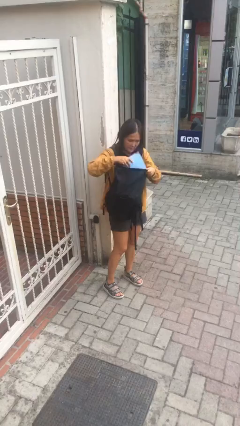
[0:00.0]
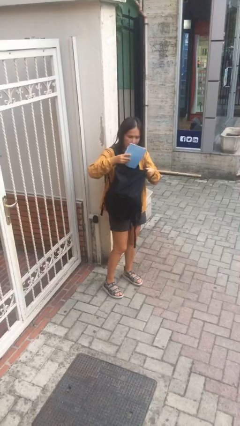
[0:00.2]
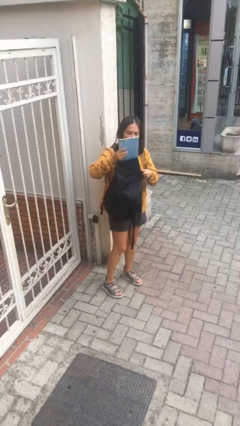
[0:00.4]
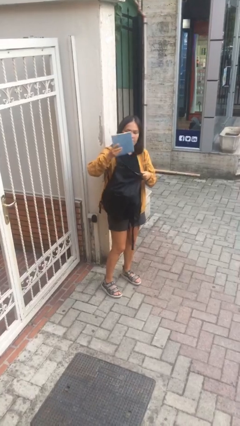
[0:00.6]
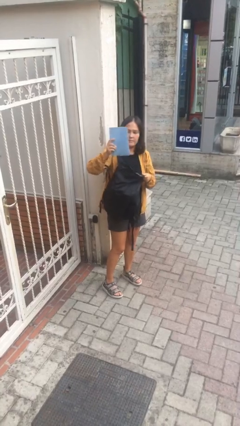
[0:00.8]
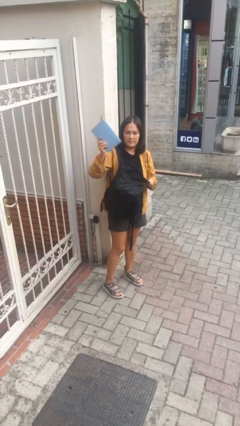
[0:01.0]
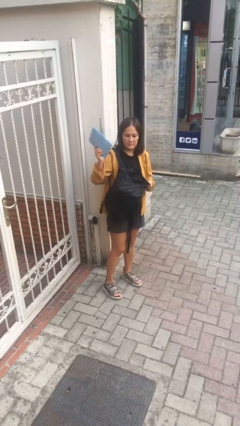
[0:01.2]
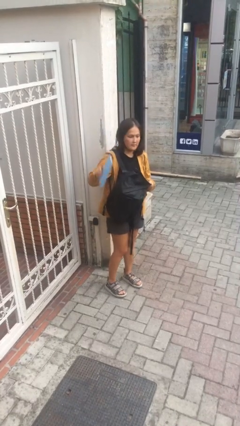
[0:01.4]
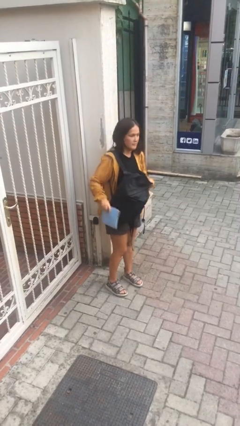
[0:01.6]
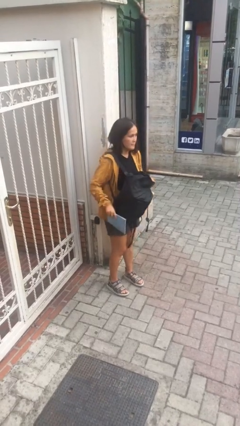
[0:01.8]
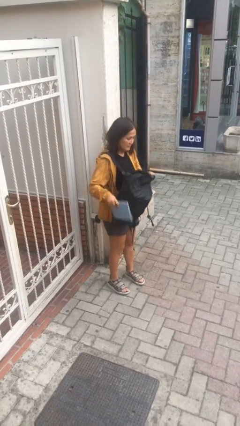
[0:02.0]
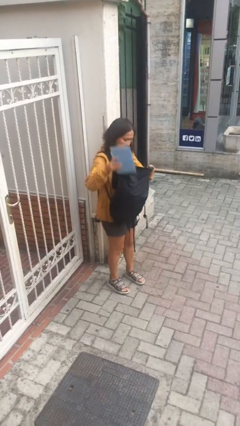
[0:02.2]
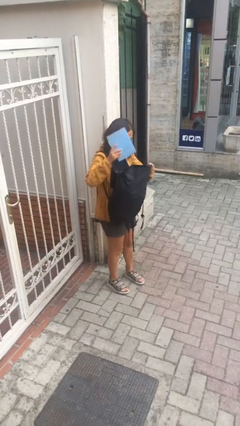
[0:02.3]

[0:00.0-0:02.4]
person takes object from backpack

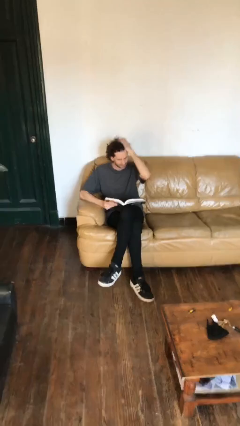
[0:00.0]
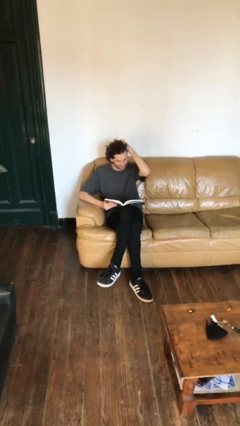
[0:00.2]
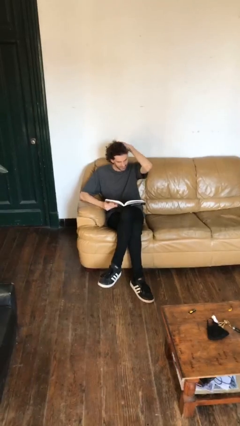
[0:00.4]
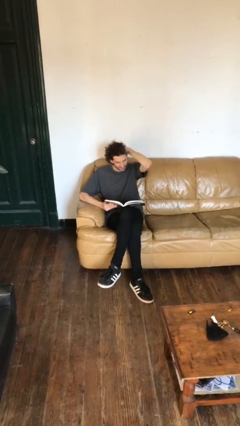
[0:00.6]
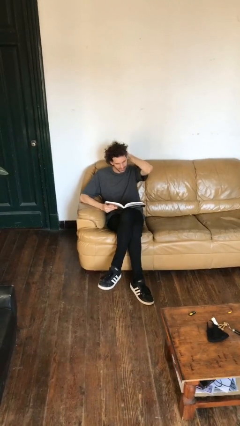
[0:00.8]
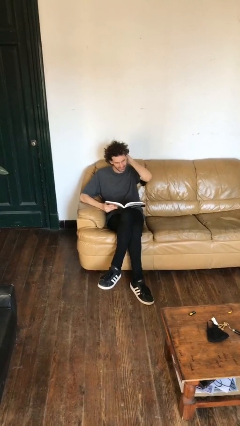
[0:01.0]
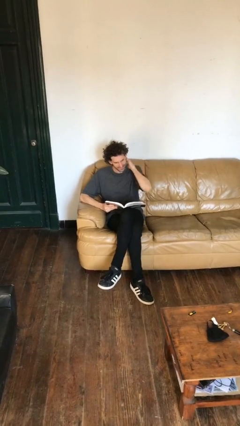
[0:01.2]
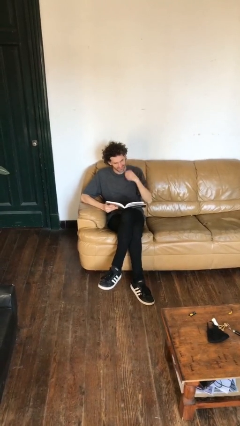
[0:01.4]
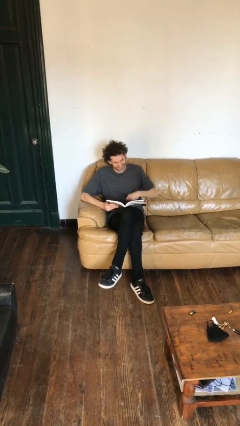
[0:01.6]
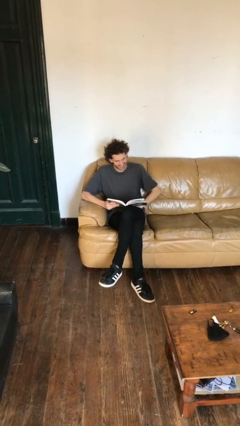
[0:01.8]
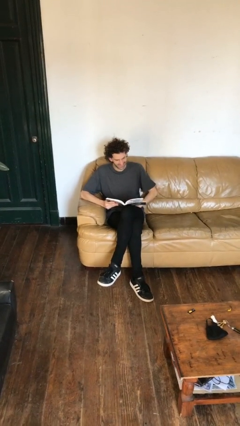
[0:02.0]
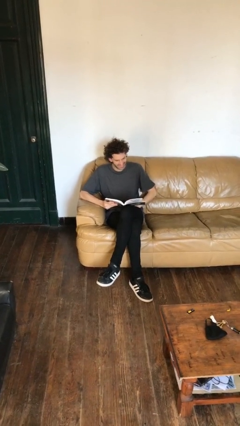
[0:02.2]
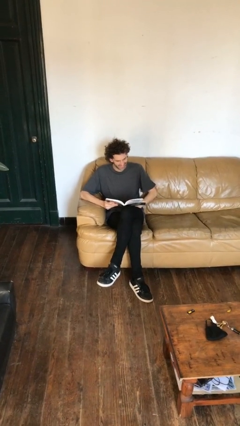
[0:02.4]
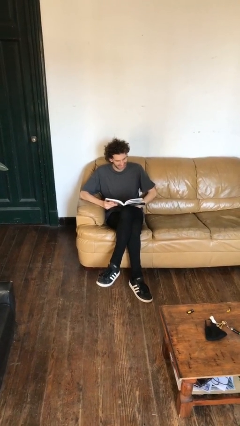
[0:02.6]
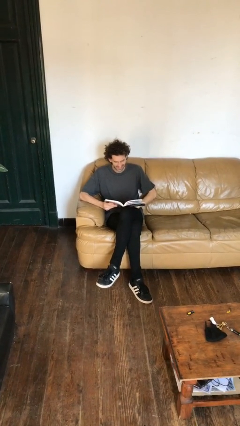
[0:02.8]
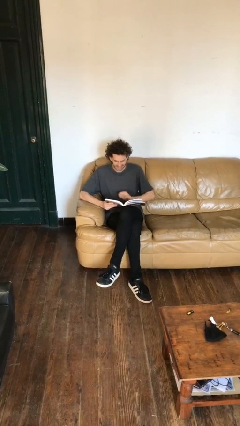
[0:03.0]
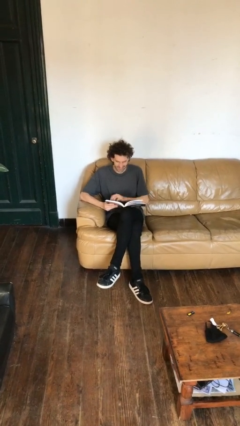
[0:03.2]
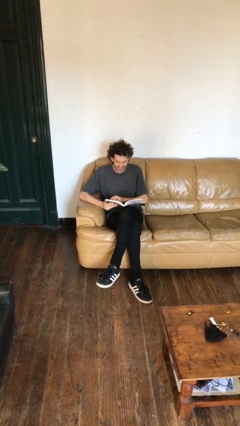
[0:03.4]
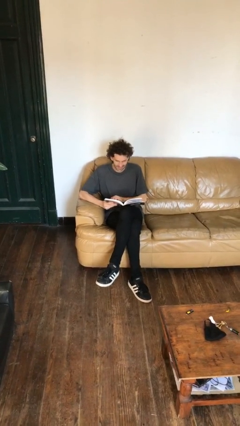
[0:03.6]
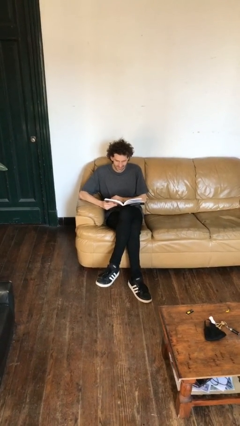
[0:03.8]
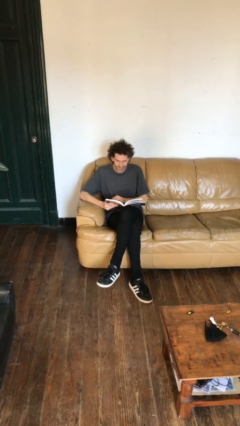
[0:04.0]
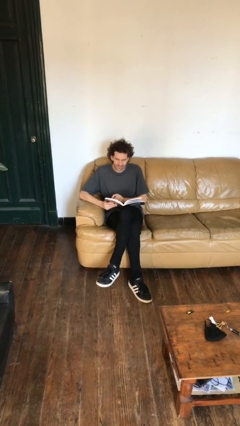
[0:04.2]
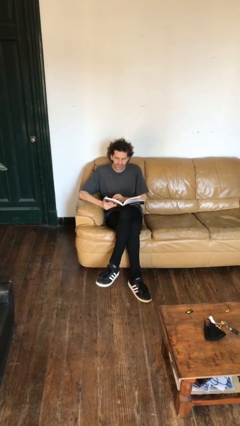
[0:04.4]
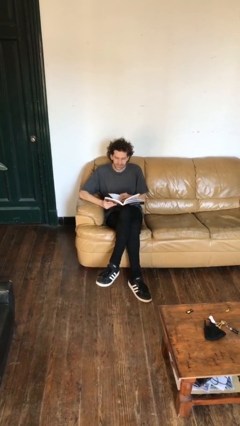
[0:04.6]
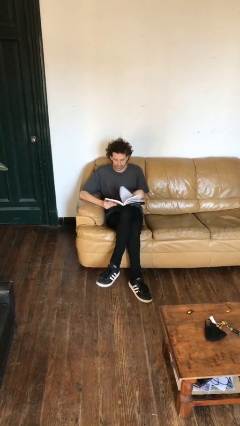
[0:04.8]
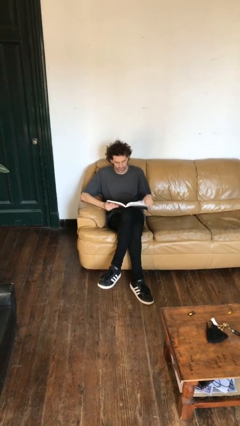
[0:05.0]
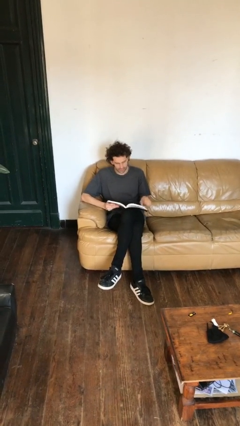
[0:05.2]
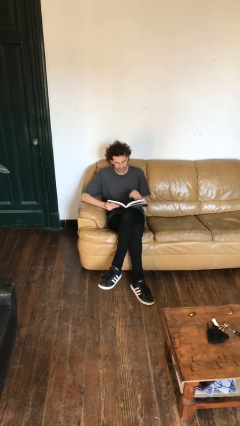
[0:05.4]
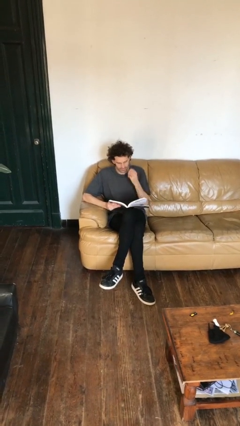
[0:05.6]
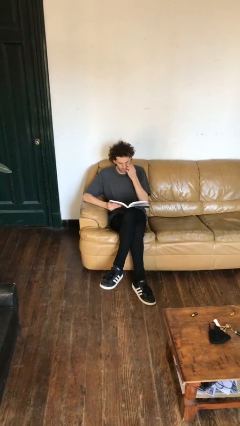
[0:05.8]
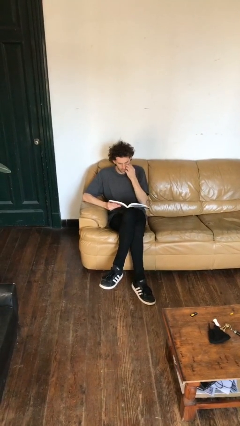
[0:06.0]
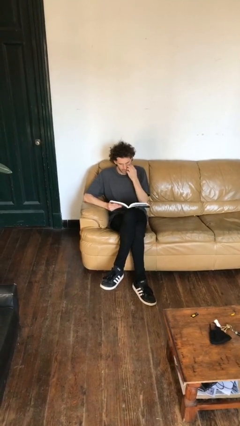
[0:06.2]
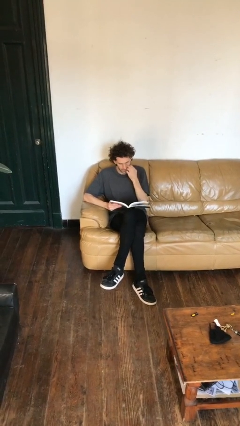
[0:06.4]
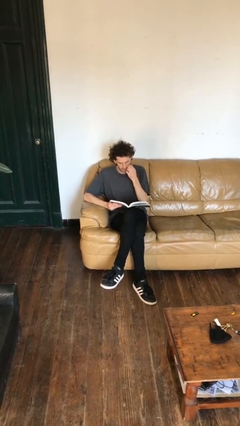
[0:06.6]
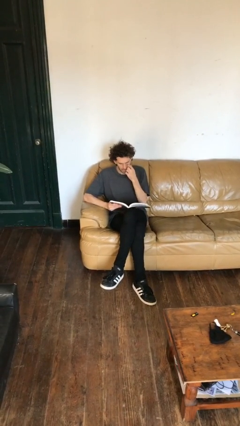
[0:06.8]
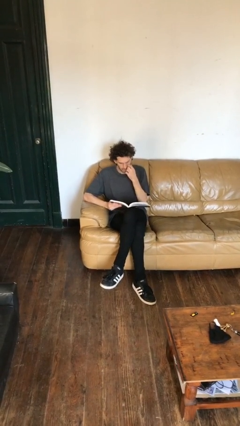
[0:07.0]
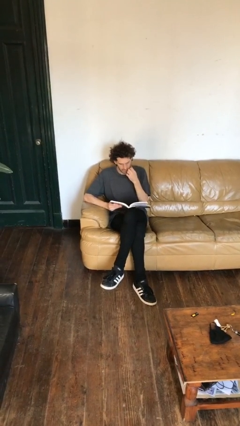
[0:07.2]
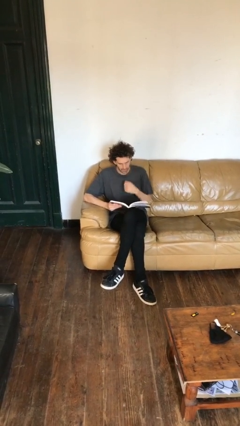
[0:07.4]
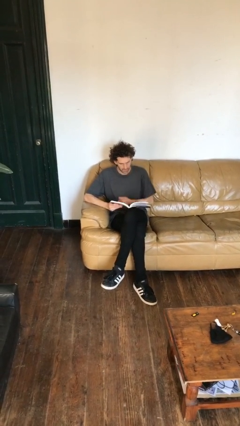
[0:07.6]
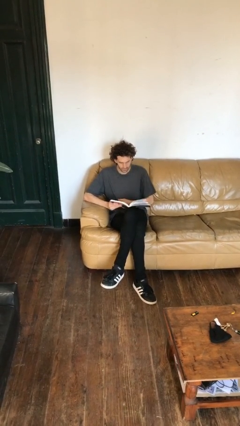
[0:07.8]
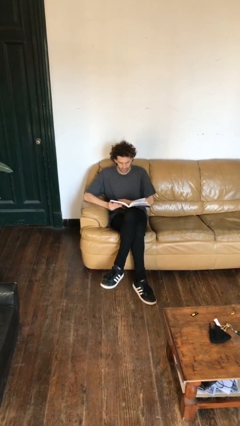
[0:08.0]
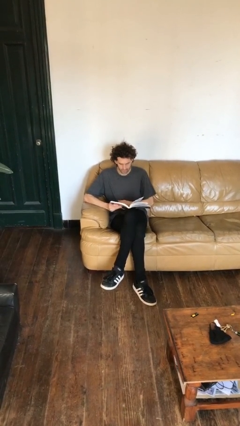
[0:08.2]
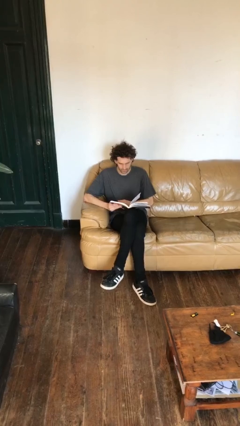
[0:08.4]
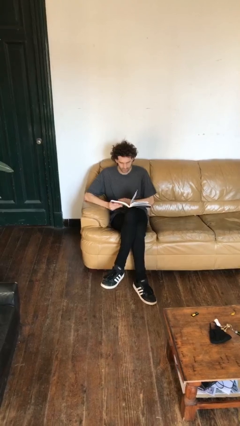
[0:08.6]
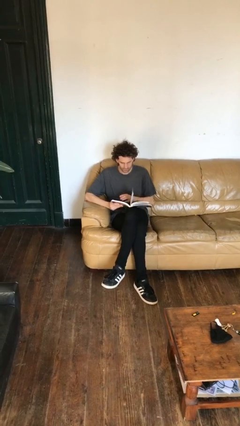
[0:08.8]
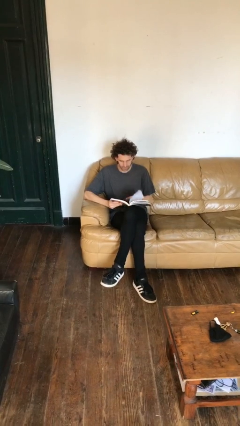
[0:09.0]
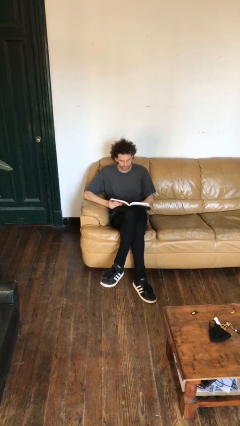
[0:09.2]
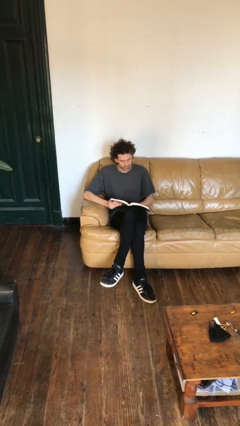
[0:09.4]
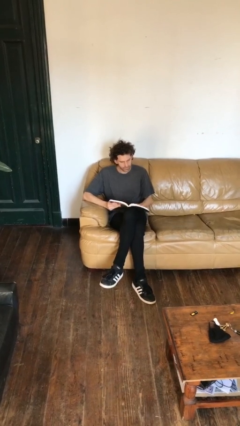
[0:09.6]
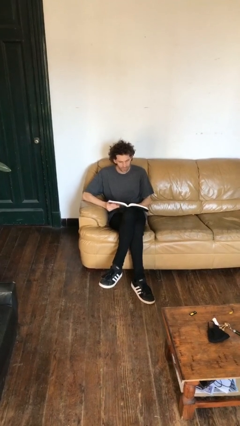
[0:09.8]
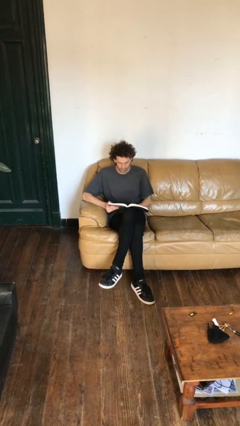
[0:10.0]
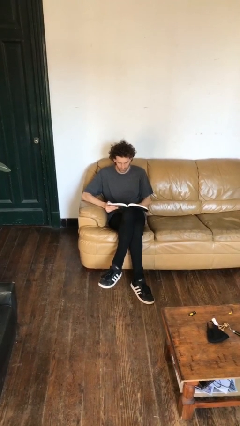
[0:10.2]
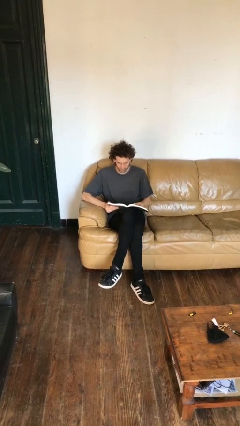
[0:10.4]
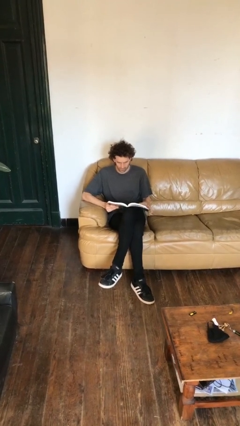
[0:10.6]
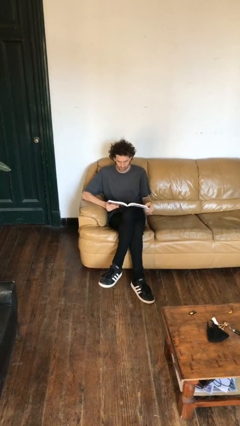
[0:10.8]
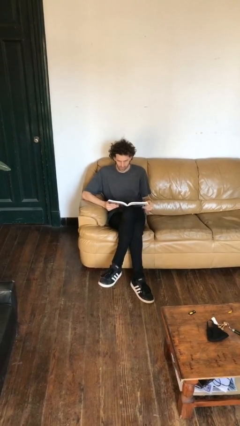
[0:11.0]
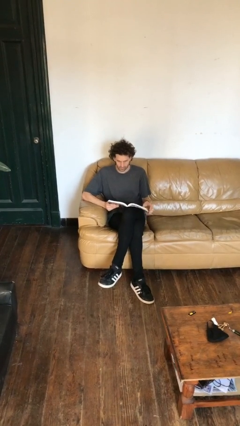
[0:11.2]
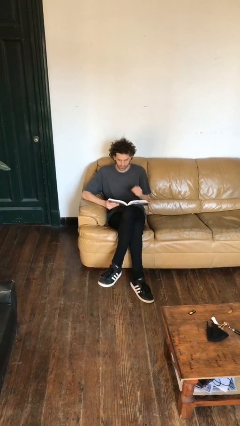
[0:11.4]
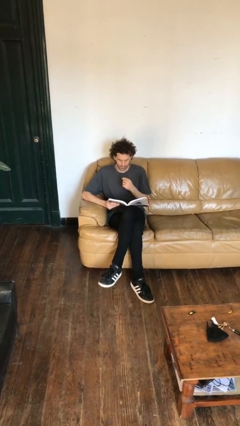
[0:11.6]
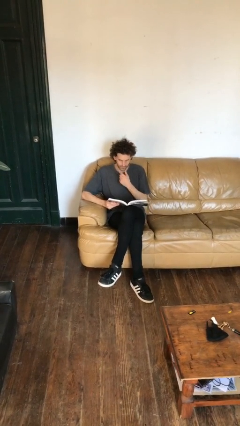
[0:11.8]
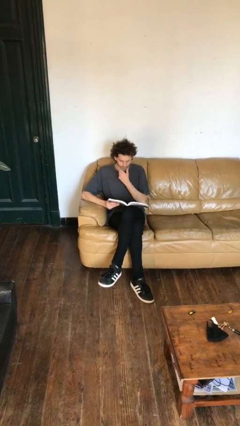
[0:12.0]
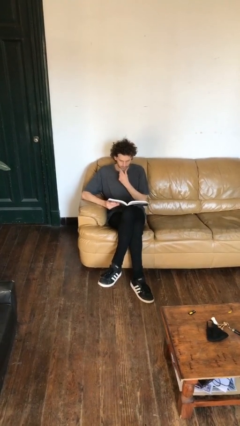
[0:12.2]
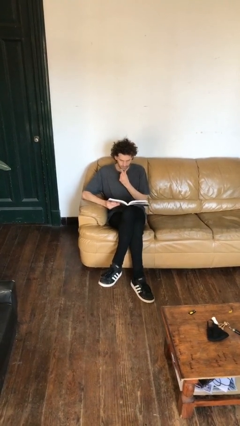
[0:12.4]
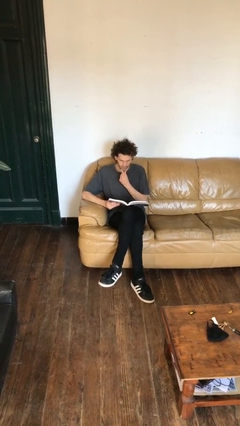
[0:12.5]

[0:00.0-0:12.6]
person reads document

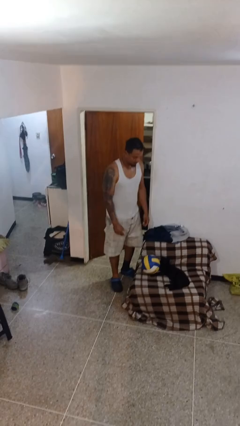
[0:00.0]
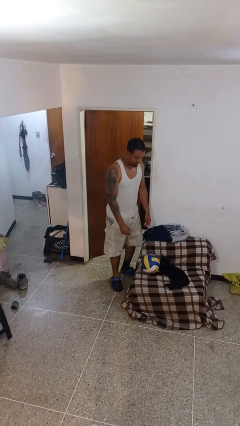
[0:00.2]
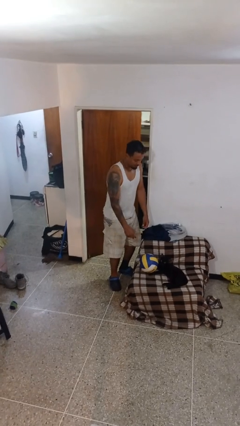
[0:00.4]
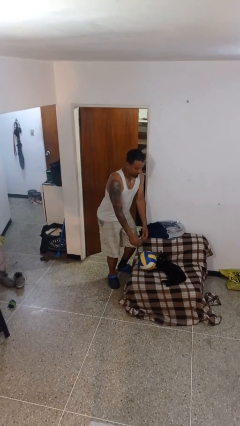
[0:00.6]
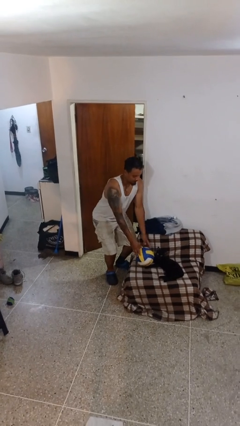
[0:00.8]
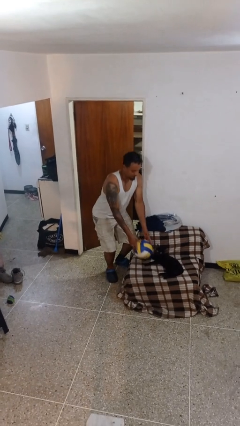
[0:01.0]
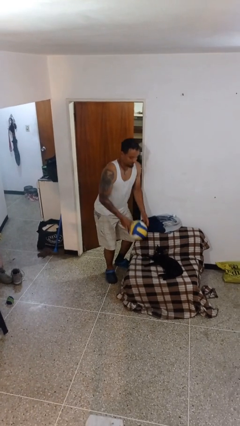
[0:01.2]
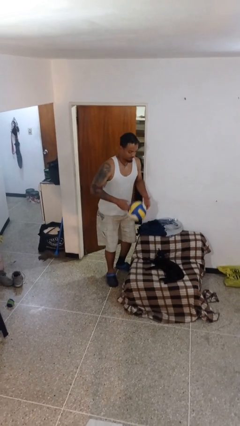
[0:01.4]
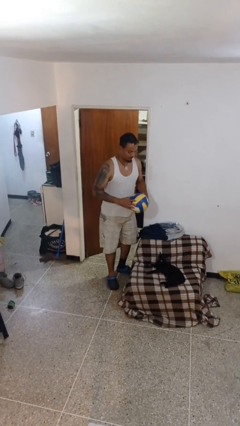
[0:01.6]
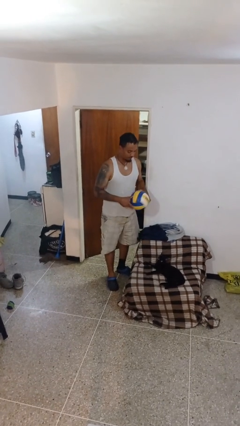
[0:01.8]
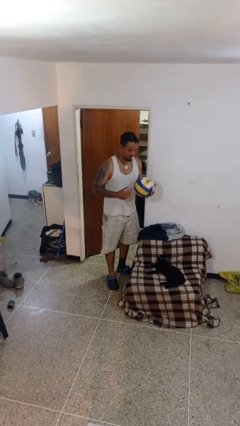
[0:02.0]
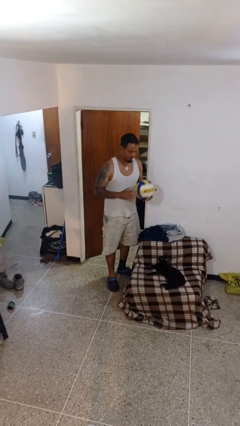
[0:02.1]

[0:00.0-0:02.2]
person picks up object from couch

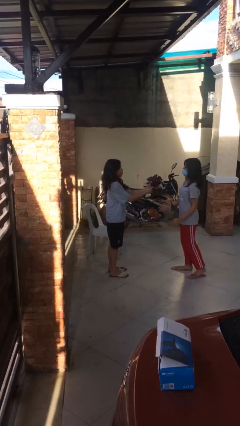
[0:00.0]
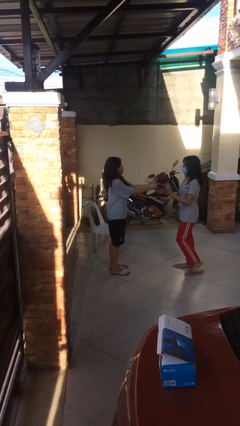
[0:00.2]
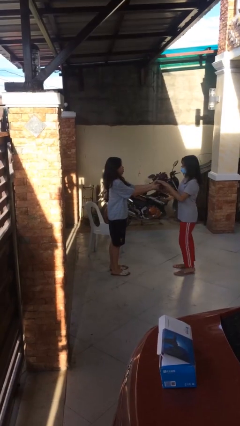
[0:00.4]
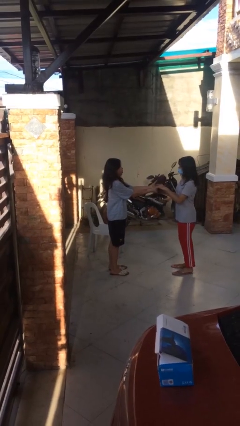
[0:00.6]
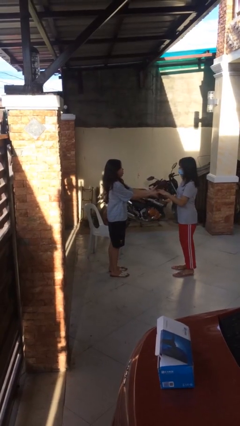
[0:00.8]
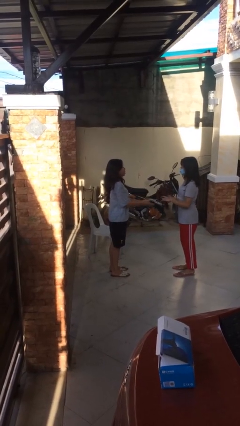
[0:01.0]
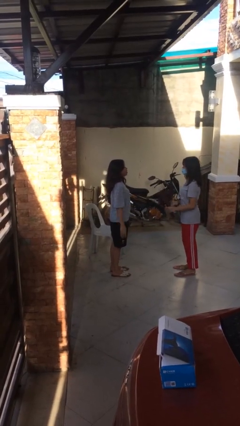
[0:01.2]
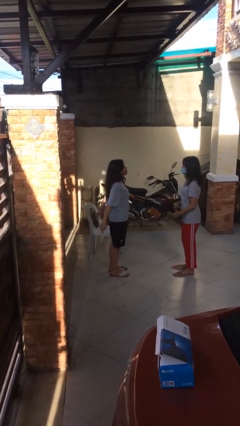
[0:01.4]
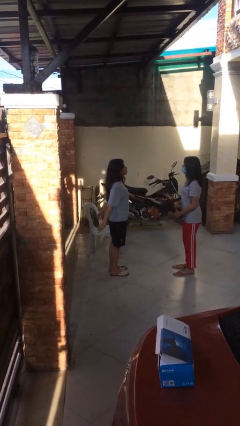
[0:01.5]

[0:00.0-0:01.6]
person transfers object to person
